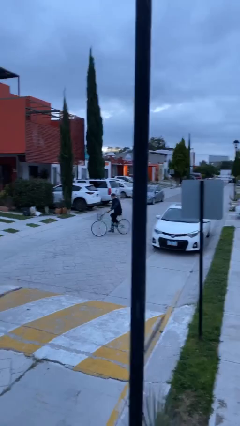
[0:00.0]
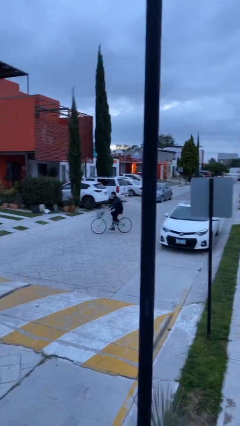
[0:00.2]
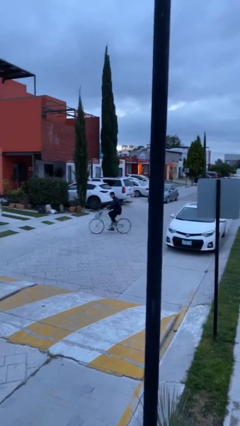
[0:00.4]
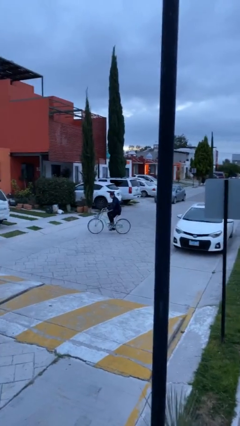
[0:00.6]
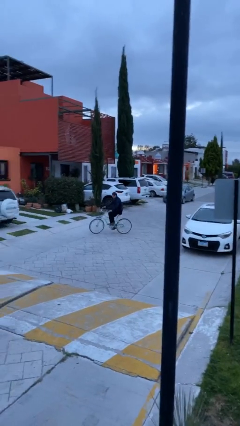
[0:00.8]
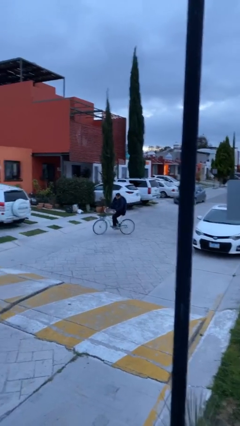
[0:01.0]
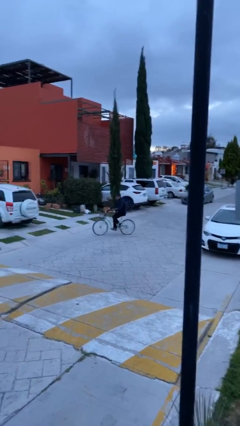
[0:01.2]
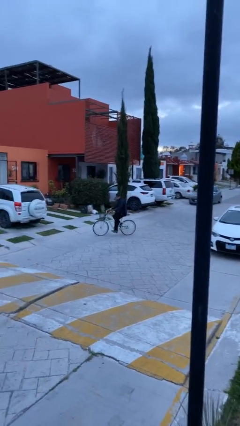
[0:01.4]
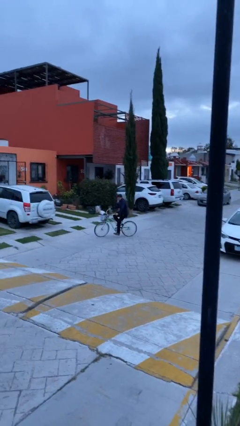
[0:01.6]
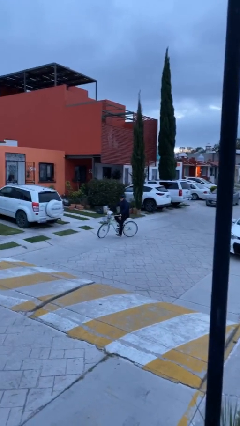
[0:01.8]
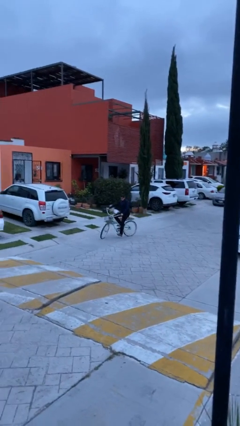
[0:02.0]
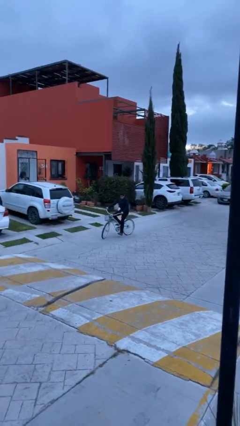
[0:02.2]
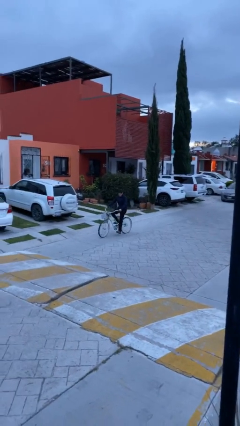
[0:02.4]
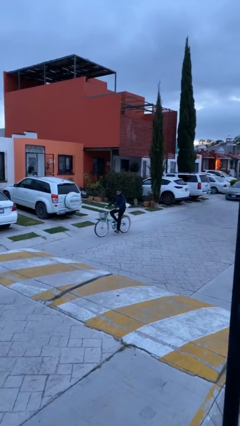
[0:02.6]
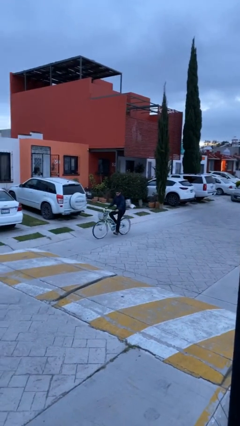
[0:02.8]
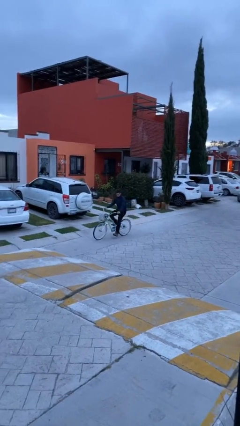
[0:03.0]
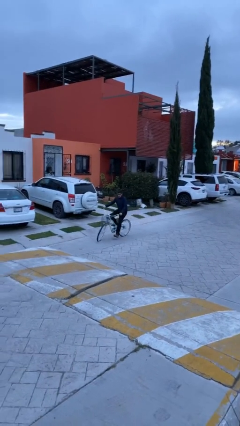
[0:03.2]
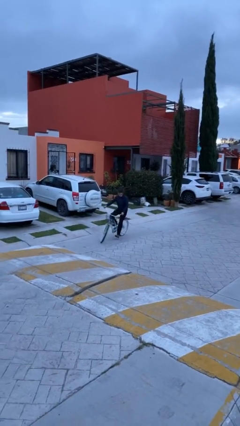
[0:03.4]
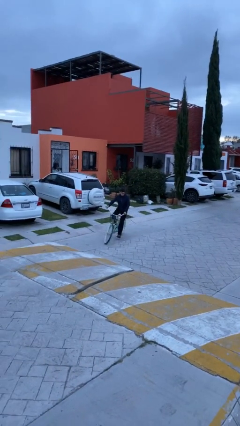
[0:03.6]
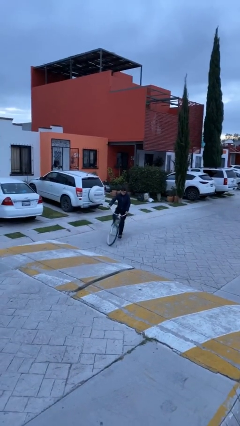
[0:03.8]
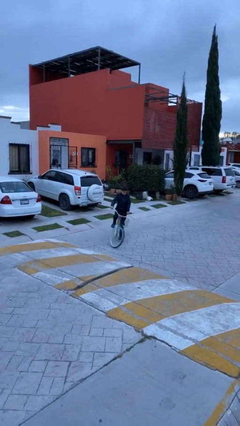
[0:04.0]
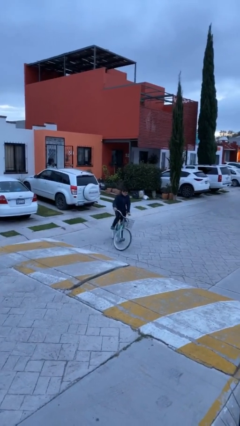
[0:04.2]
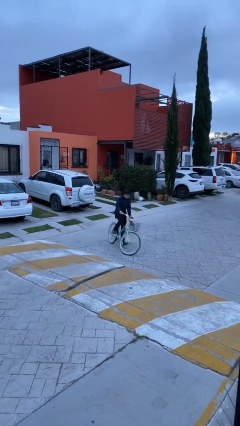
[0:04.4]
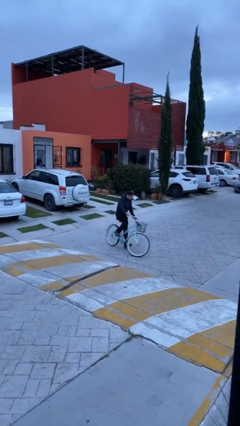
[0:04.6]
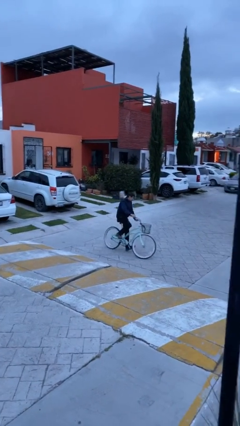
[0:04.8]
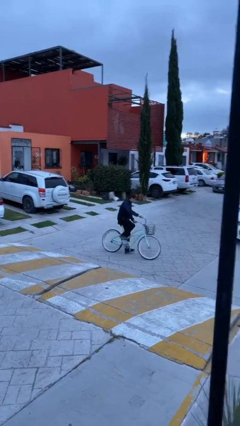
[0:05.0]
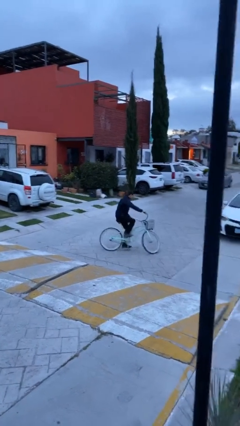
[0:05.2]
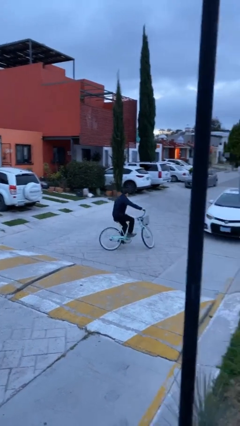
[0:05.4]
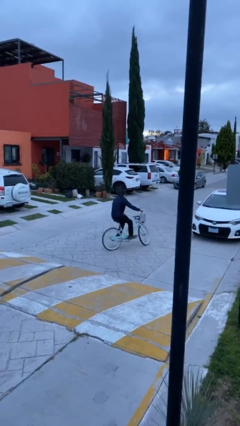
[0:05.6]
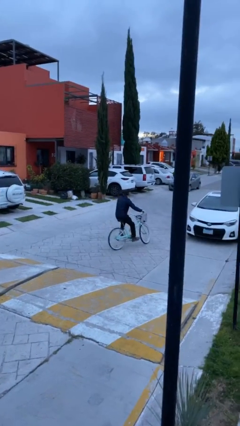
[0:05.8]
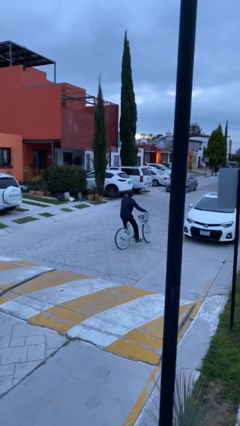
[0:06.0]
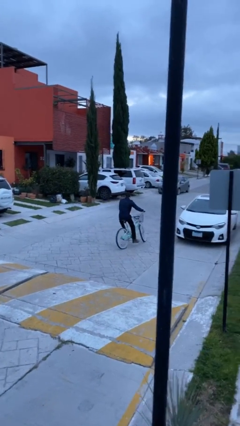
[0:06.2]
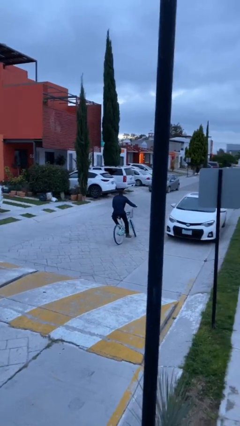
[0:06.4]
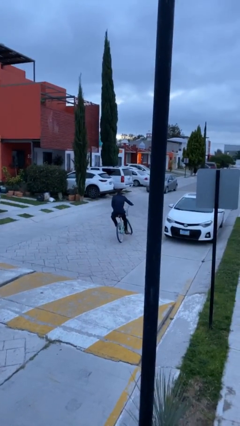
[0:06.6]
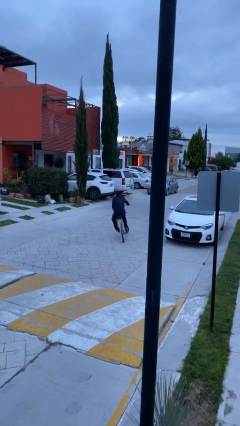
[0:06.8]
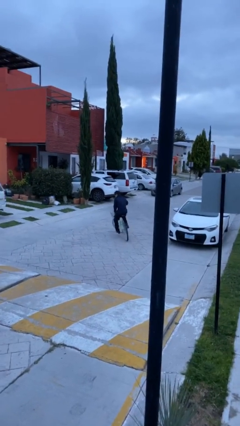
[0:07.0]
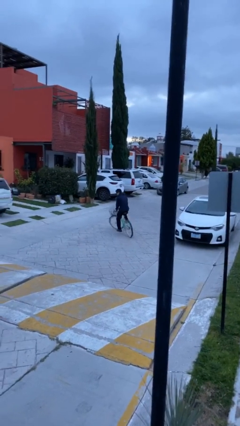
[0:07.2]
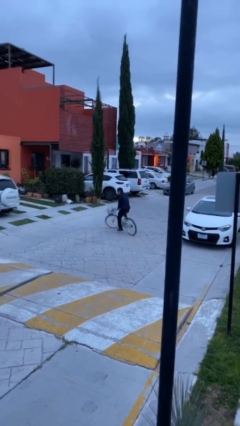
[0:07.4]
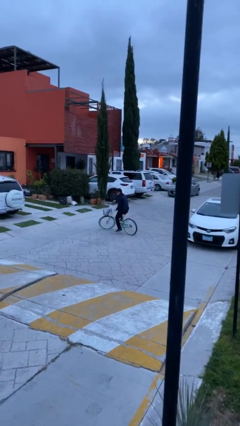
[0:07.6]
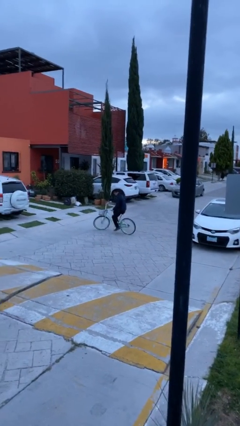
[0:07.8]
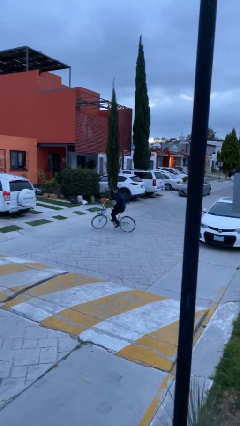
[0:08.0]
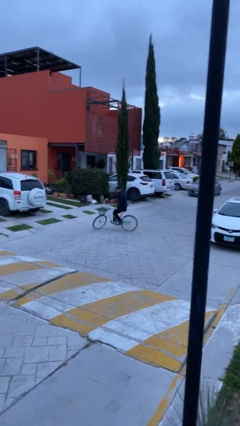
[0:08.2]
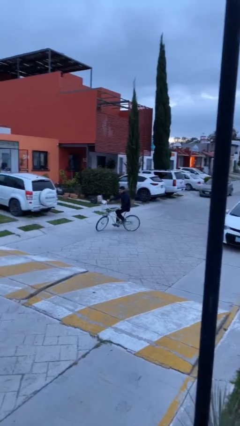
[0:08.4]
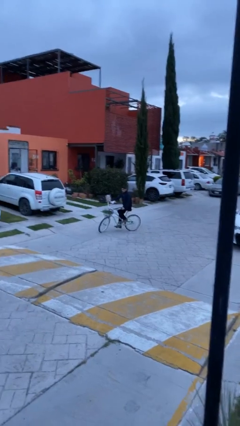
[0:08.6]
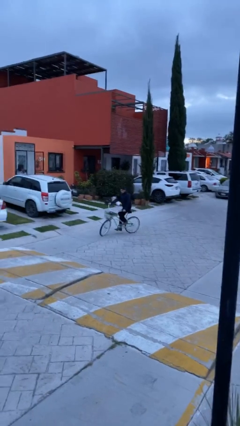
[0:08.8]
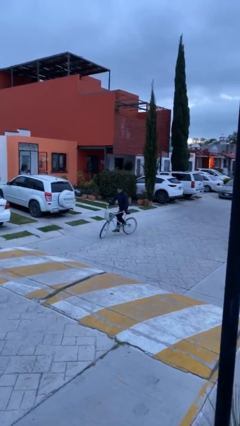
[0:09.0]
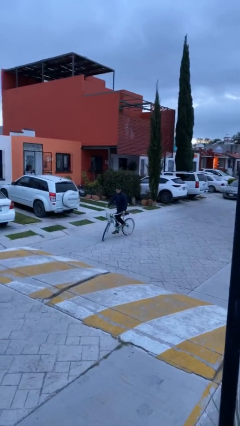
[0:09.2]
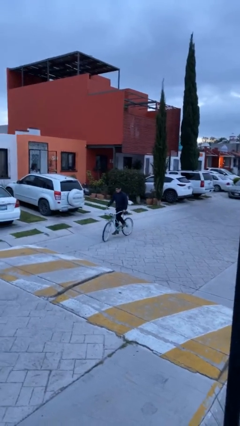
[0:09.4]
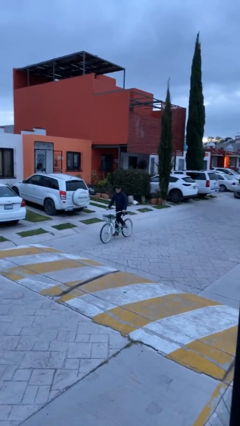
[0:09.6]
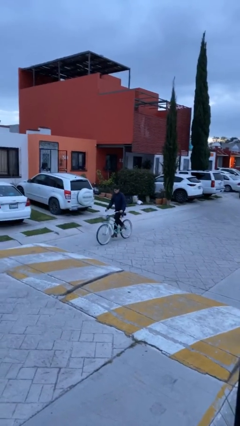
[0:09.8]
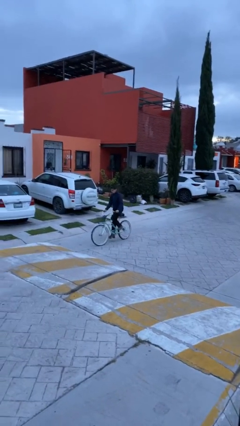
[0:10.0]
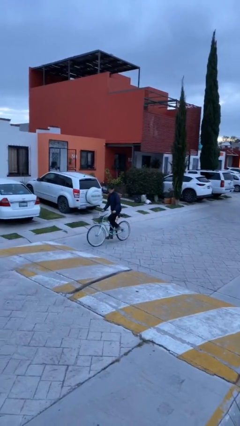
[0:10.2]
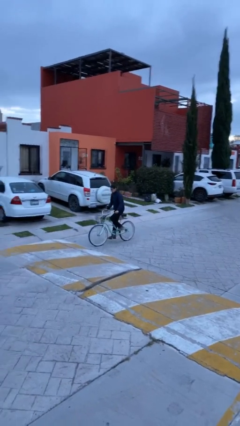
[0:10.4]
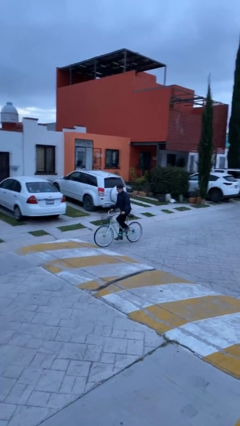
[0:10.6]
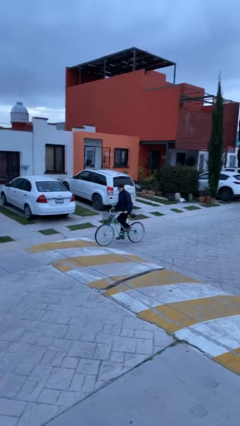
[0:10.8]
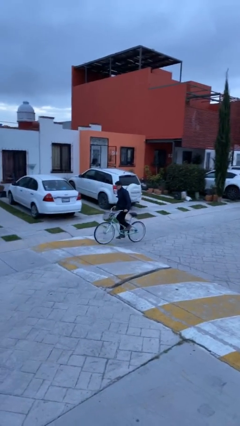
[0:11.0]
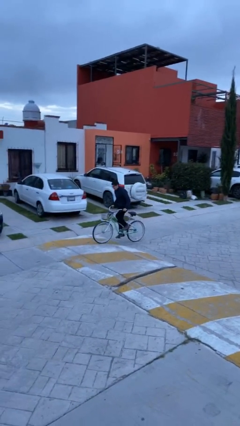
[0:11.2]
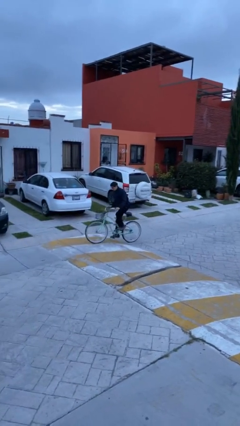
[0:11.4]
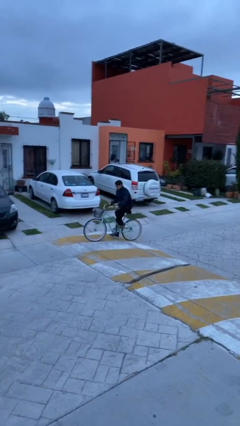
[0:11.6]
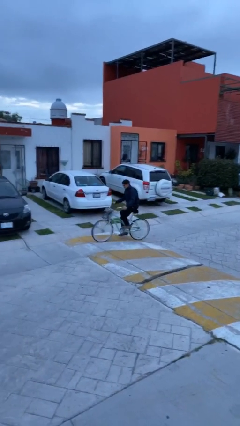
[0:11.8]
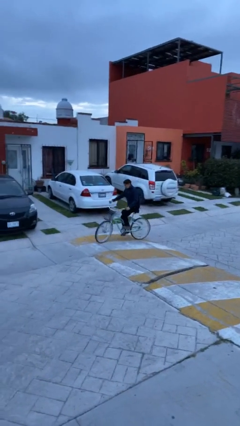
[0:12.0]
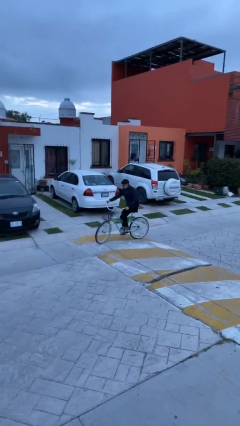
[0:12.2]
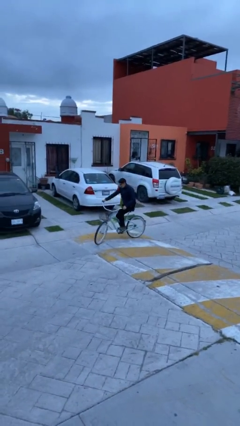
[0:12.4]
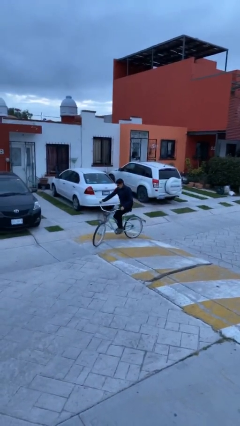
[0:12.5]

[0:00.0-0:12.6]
person rides bicycle

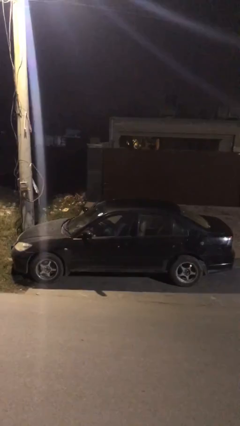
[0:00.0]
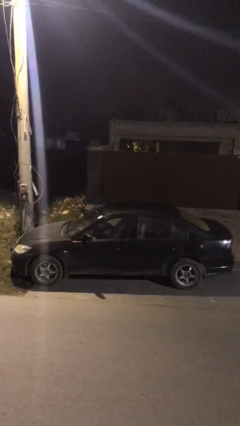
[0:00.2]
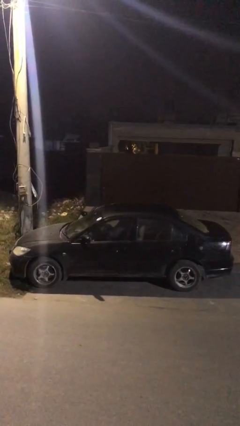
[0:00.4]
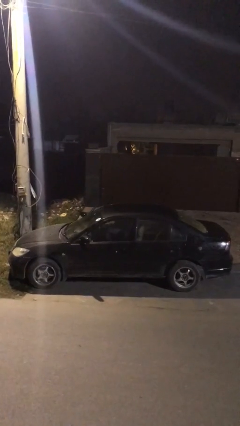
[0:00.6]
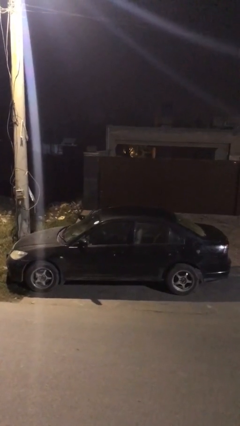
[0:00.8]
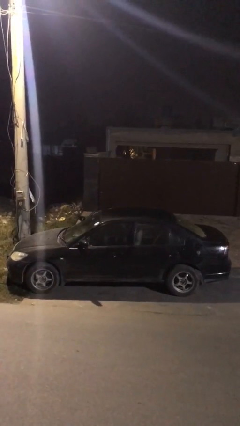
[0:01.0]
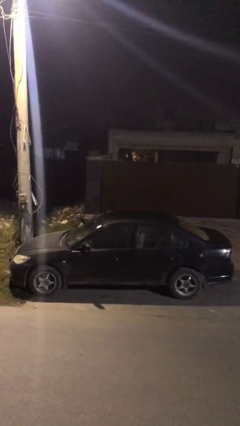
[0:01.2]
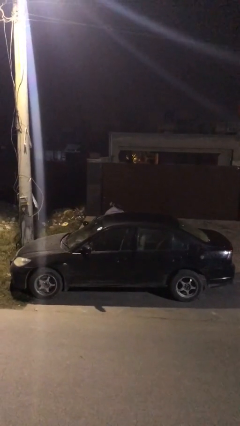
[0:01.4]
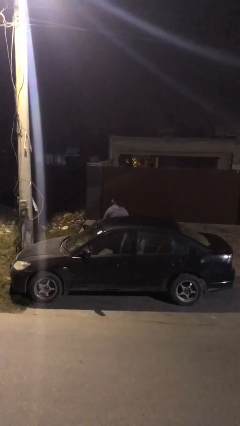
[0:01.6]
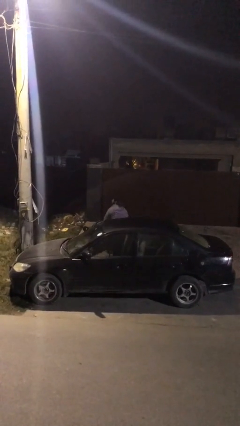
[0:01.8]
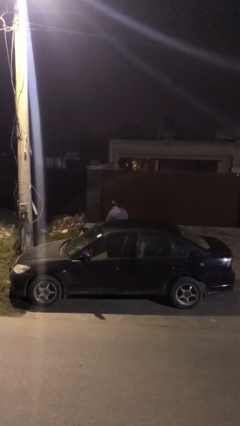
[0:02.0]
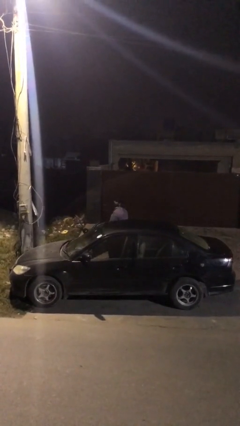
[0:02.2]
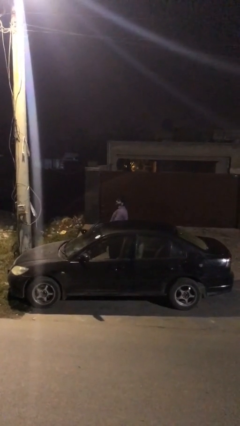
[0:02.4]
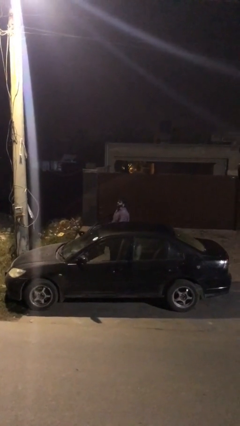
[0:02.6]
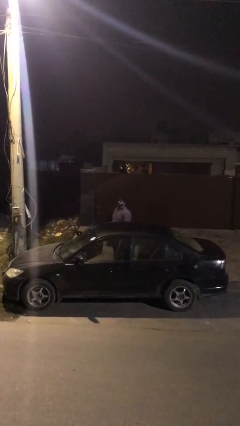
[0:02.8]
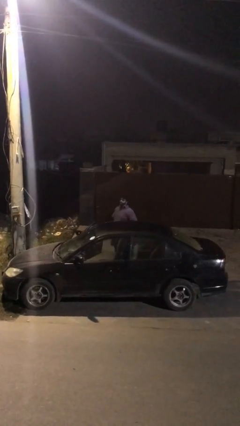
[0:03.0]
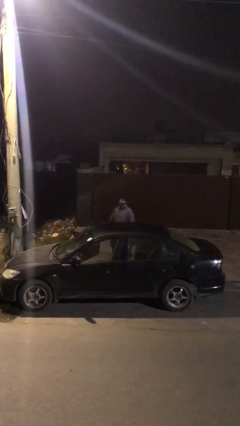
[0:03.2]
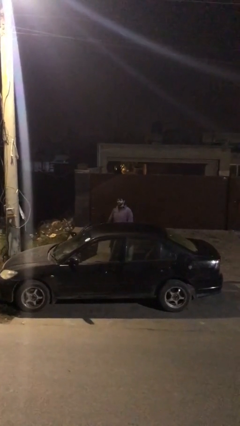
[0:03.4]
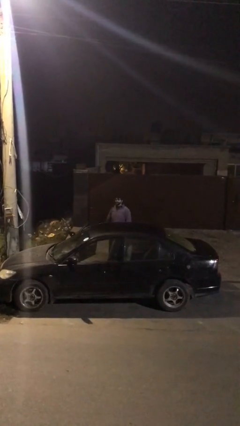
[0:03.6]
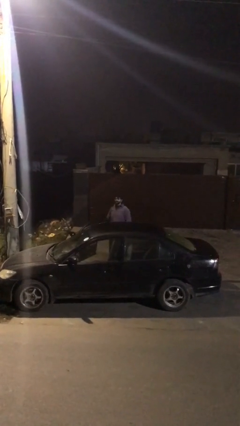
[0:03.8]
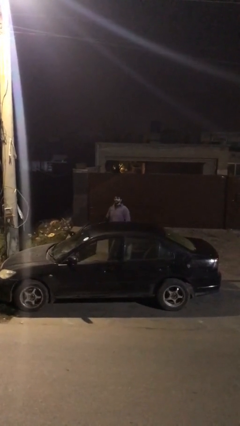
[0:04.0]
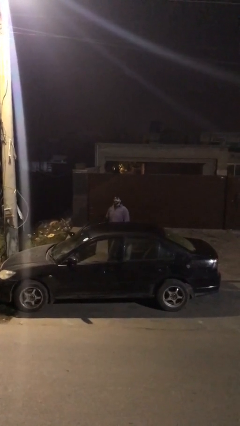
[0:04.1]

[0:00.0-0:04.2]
person exits car

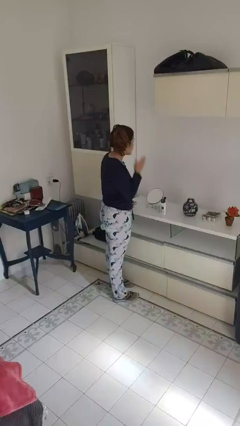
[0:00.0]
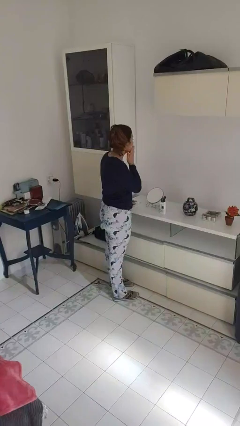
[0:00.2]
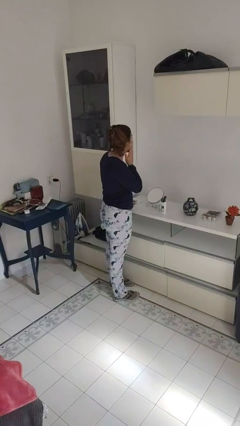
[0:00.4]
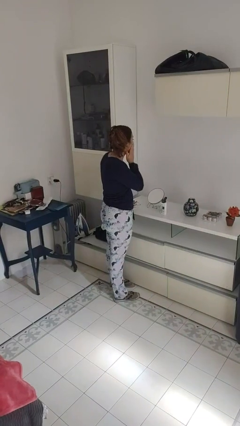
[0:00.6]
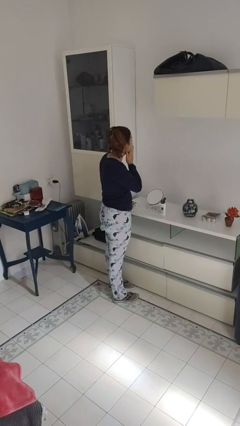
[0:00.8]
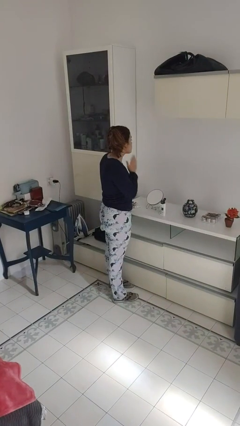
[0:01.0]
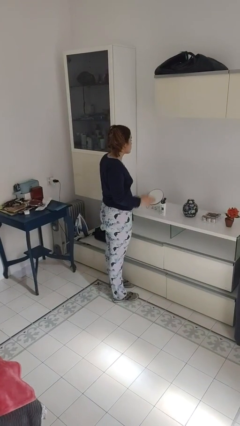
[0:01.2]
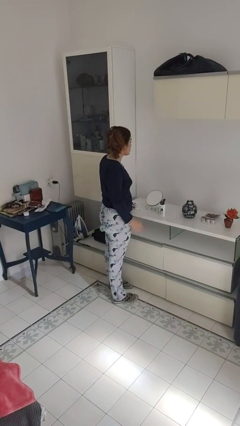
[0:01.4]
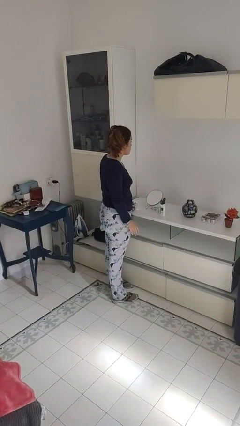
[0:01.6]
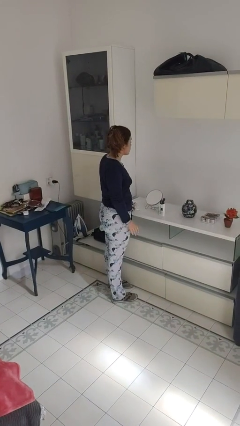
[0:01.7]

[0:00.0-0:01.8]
person applies shaving cream
